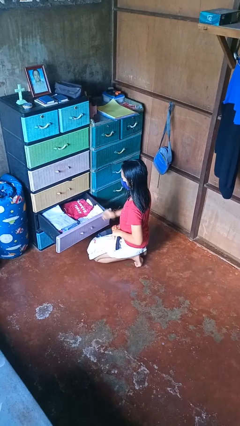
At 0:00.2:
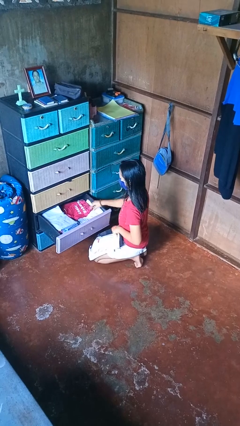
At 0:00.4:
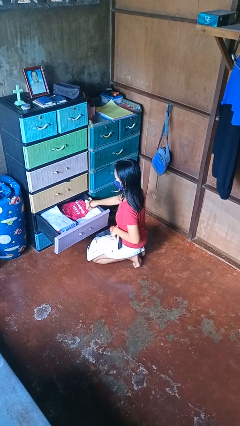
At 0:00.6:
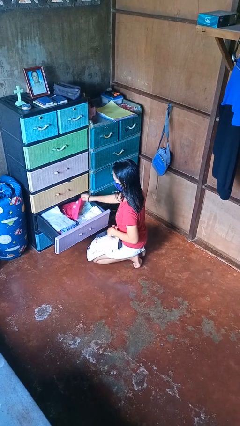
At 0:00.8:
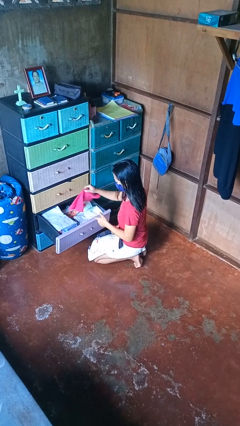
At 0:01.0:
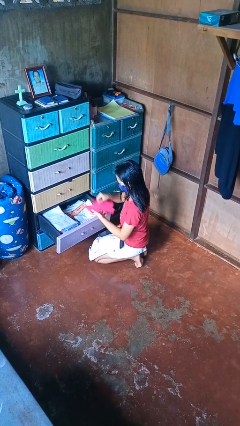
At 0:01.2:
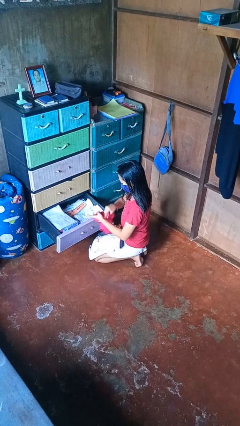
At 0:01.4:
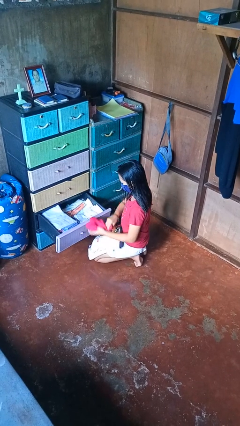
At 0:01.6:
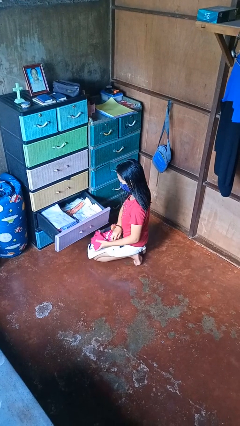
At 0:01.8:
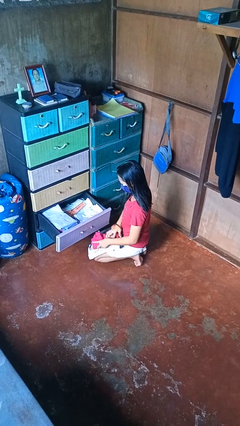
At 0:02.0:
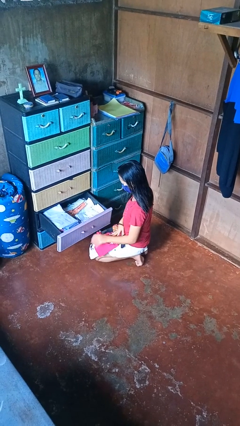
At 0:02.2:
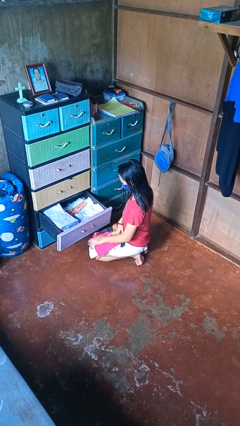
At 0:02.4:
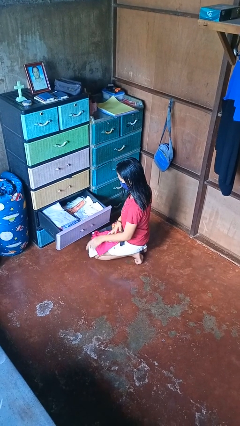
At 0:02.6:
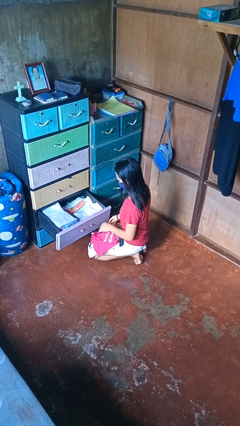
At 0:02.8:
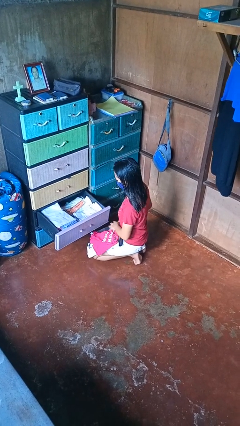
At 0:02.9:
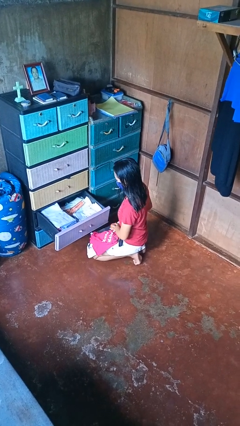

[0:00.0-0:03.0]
person takes clothes from dresser

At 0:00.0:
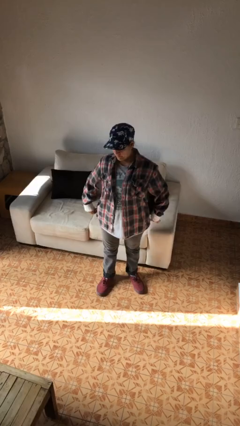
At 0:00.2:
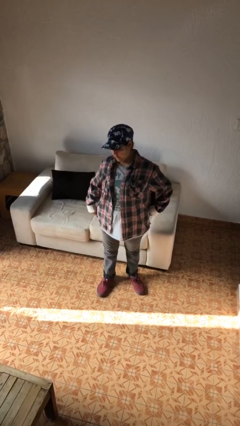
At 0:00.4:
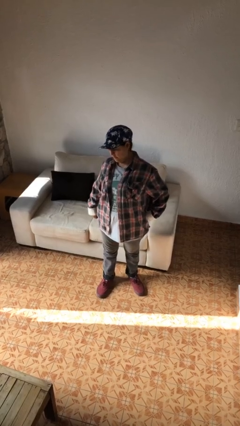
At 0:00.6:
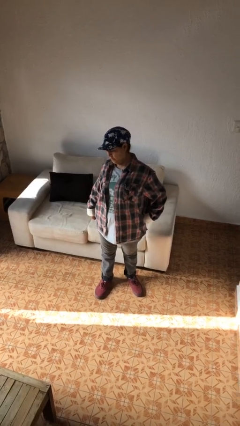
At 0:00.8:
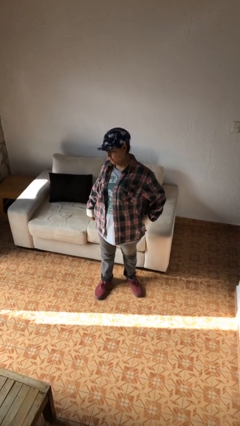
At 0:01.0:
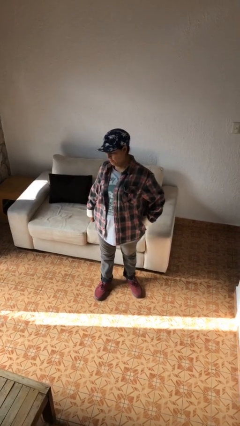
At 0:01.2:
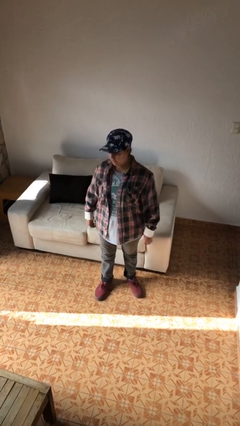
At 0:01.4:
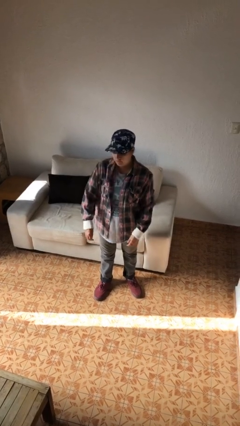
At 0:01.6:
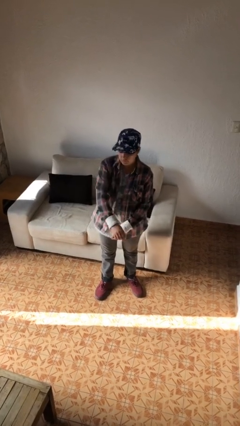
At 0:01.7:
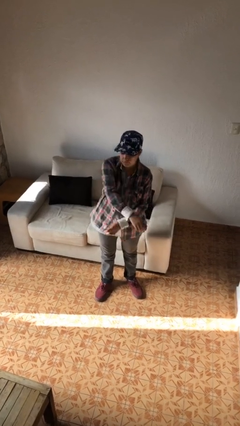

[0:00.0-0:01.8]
person stretches back

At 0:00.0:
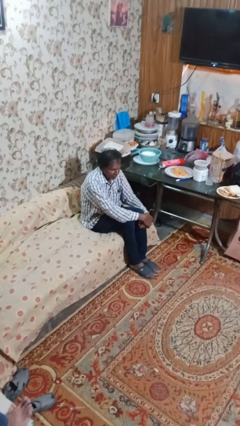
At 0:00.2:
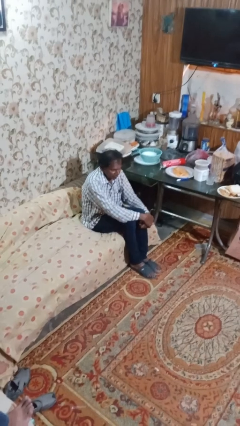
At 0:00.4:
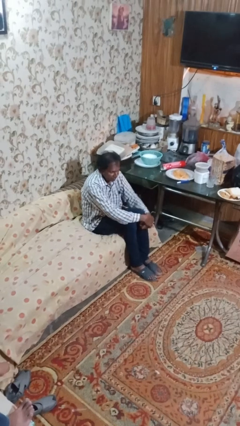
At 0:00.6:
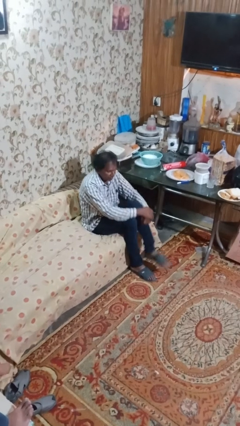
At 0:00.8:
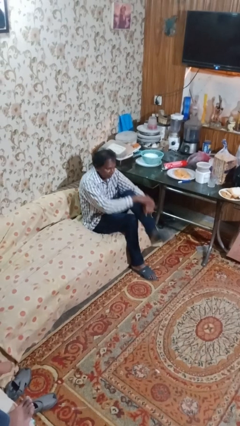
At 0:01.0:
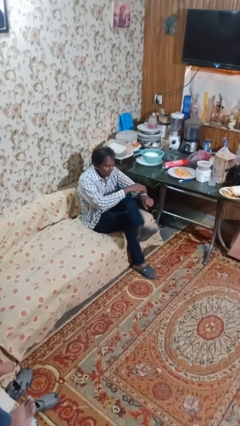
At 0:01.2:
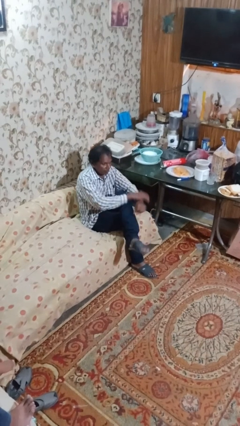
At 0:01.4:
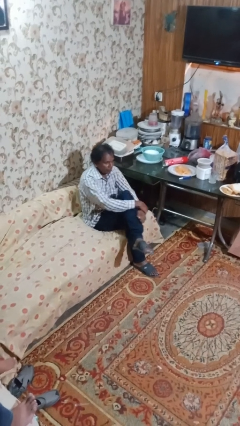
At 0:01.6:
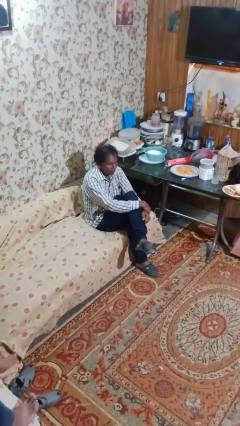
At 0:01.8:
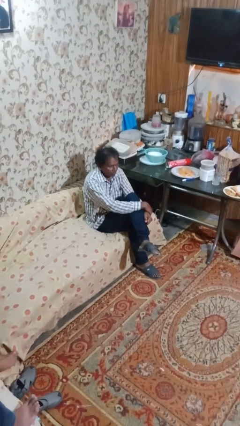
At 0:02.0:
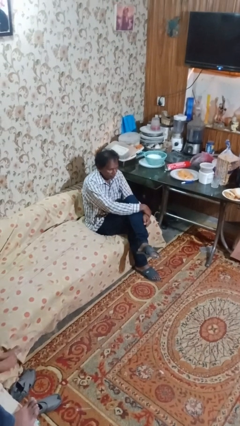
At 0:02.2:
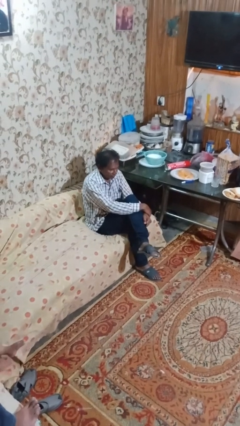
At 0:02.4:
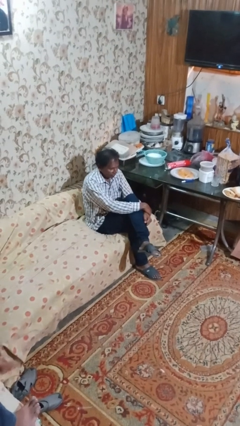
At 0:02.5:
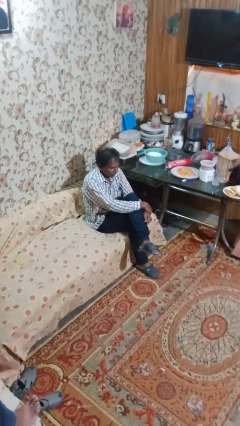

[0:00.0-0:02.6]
person crosses legs

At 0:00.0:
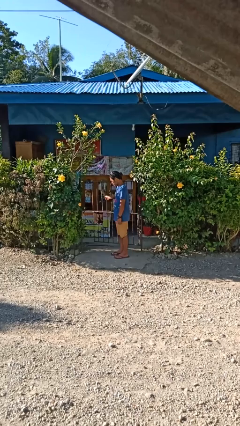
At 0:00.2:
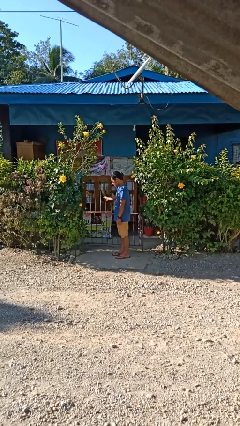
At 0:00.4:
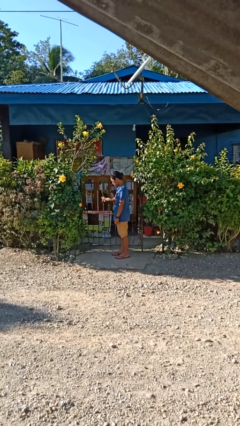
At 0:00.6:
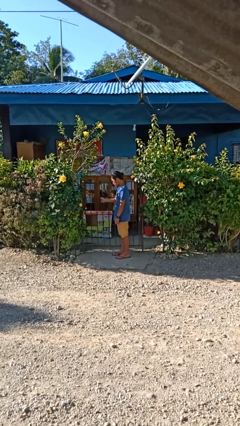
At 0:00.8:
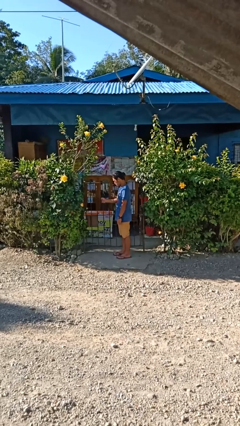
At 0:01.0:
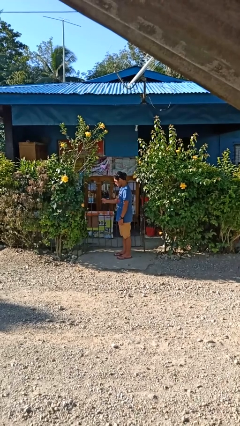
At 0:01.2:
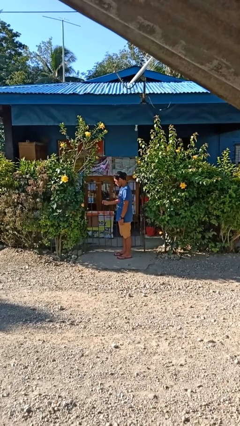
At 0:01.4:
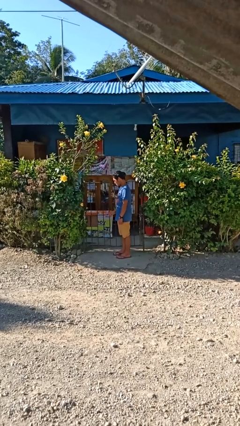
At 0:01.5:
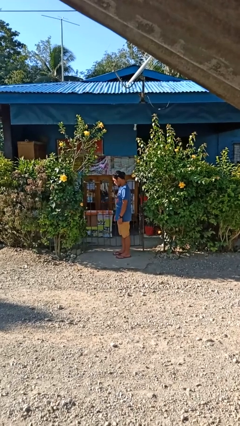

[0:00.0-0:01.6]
person closes gate

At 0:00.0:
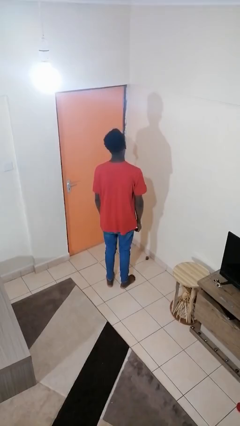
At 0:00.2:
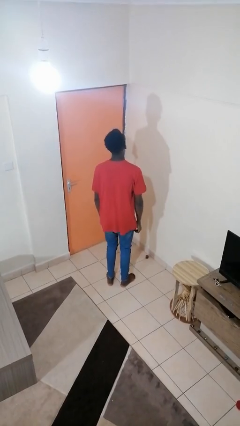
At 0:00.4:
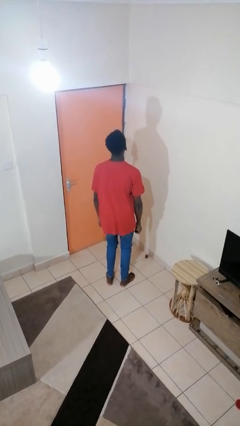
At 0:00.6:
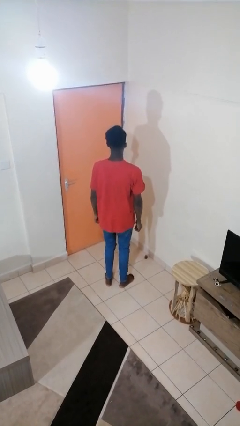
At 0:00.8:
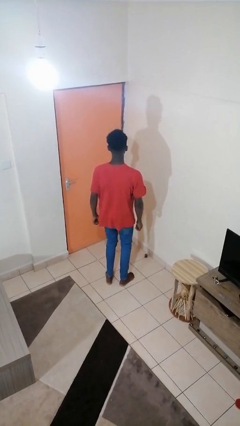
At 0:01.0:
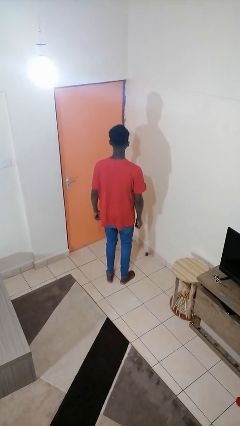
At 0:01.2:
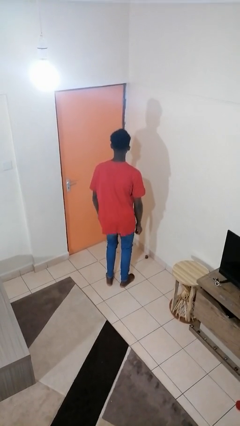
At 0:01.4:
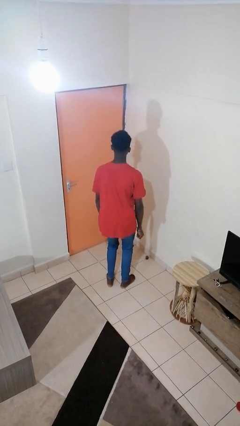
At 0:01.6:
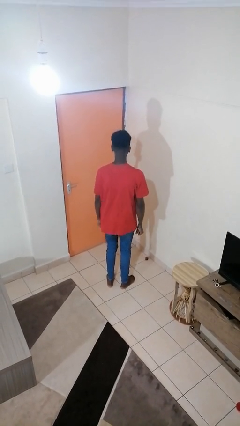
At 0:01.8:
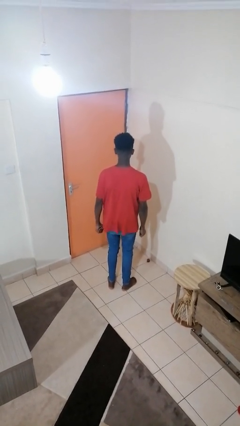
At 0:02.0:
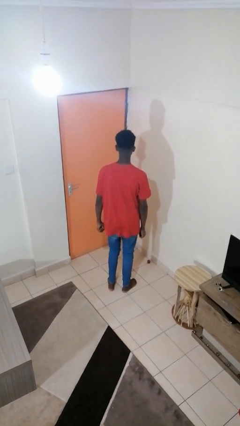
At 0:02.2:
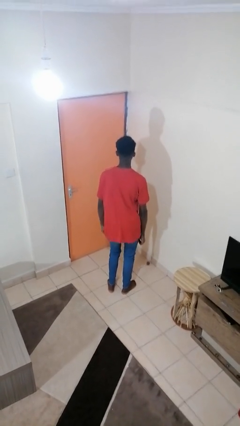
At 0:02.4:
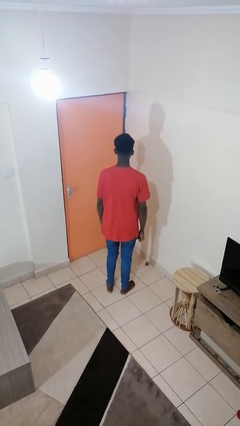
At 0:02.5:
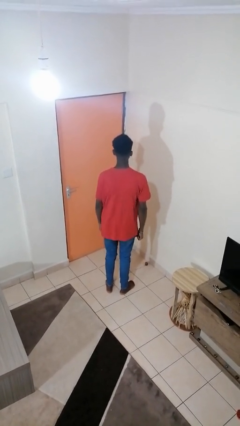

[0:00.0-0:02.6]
person wiggles hips

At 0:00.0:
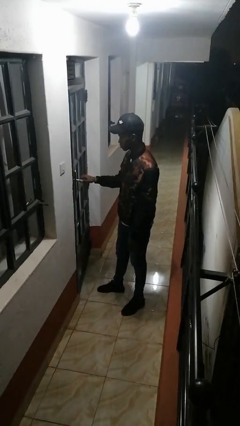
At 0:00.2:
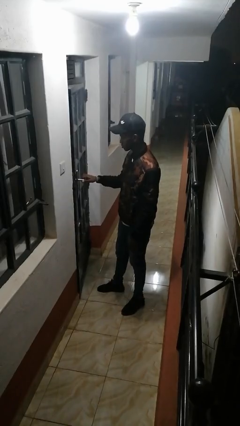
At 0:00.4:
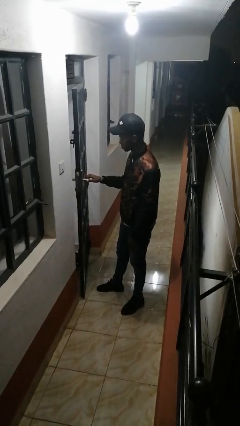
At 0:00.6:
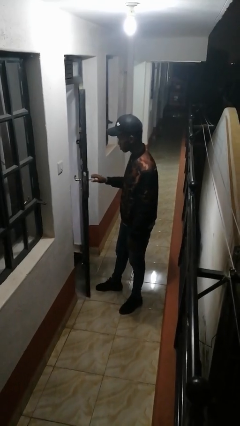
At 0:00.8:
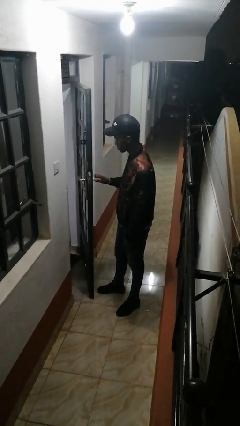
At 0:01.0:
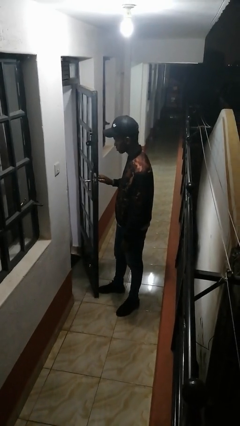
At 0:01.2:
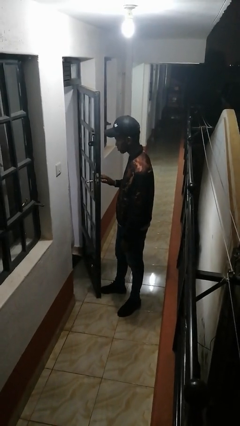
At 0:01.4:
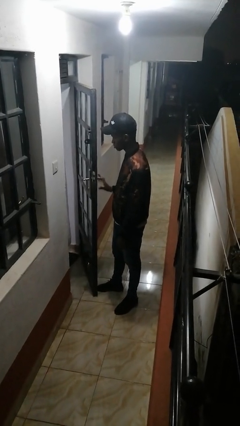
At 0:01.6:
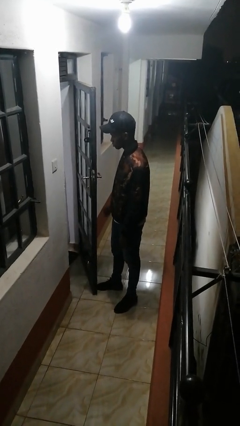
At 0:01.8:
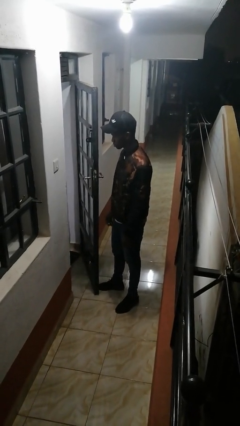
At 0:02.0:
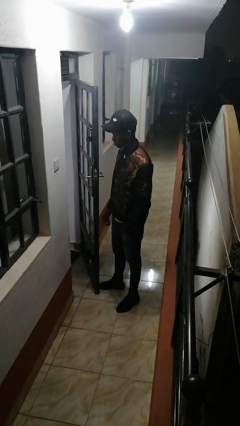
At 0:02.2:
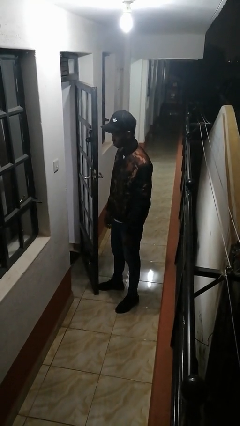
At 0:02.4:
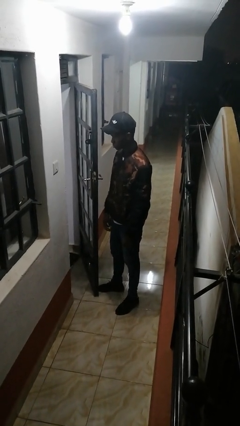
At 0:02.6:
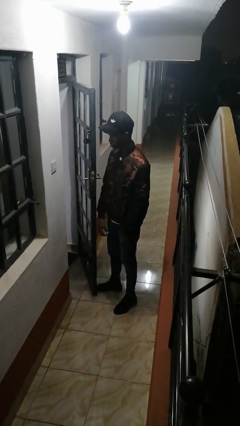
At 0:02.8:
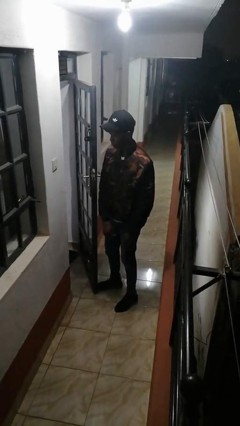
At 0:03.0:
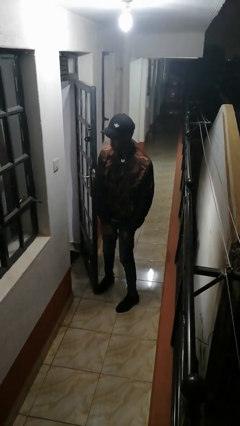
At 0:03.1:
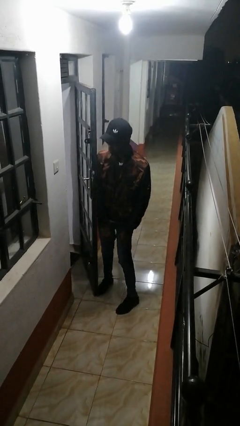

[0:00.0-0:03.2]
person opens facility door

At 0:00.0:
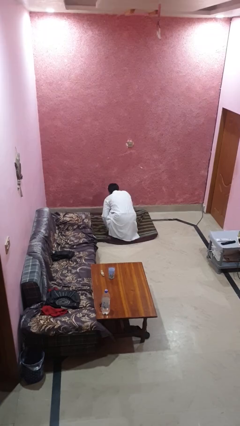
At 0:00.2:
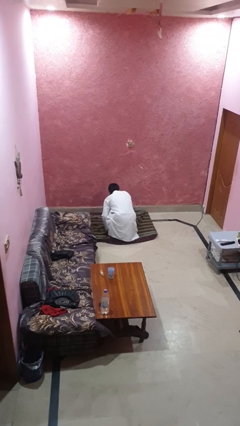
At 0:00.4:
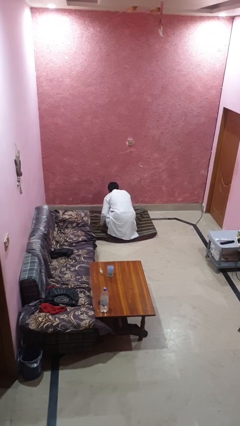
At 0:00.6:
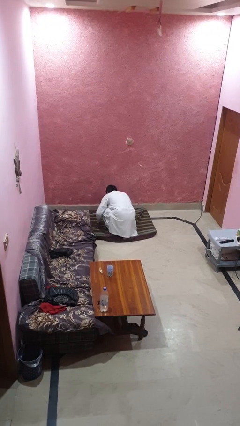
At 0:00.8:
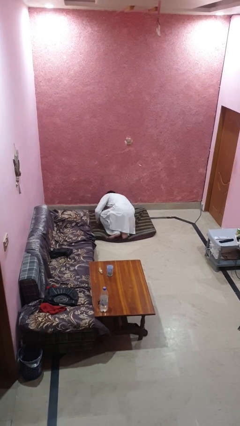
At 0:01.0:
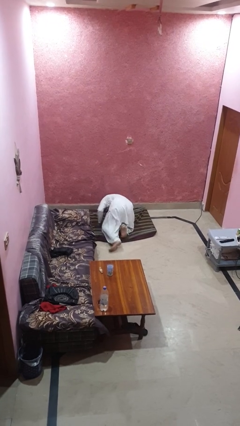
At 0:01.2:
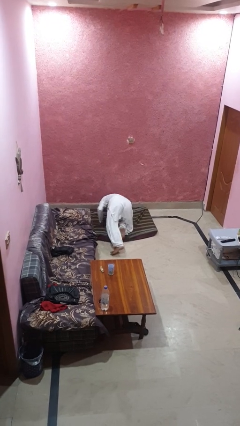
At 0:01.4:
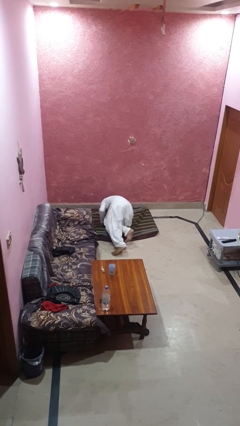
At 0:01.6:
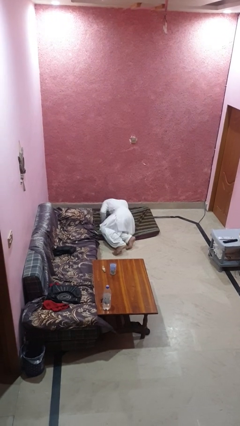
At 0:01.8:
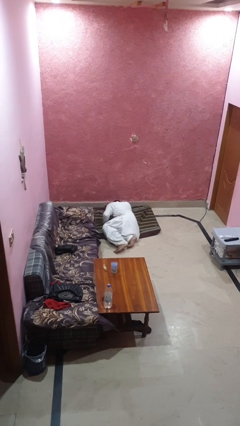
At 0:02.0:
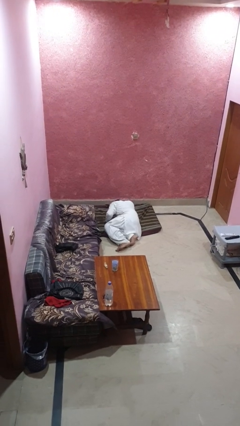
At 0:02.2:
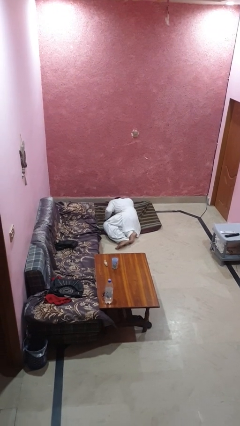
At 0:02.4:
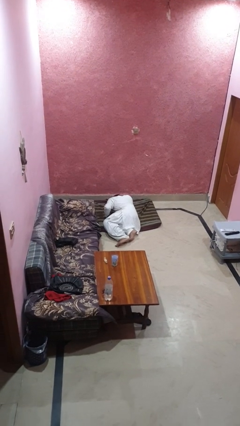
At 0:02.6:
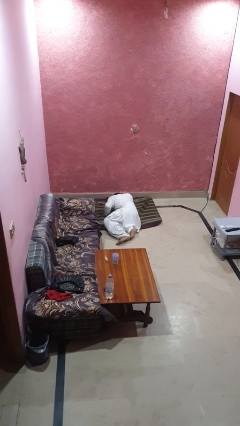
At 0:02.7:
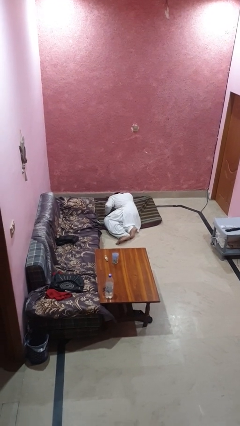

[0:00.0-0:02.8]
person lies down on floor
